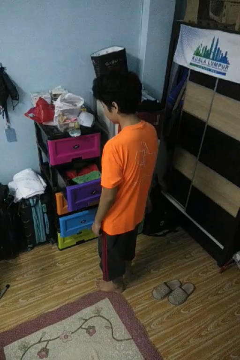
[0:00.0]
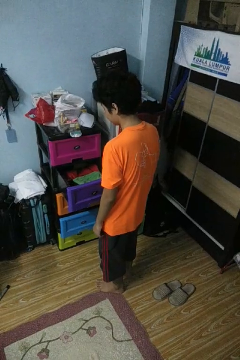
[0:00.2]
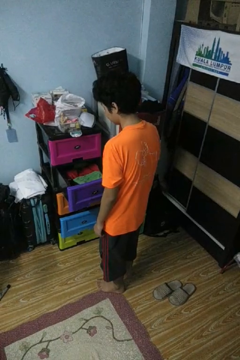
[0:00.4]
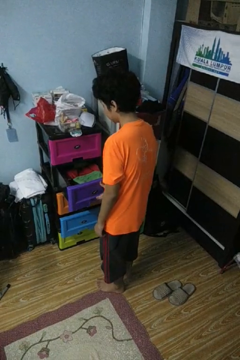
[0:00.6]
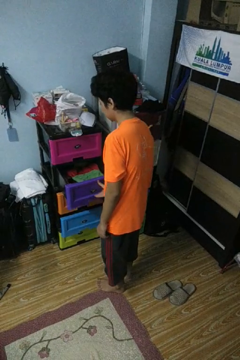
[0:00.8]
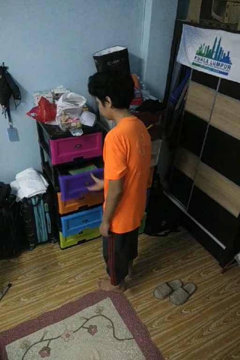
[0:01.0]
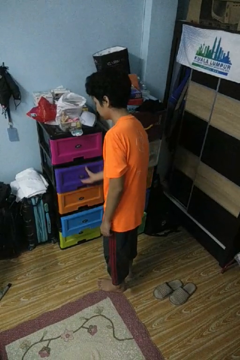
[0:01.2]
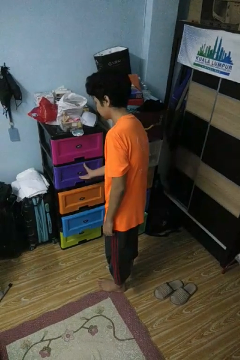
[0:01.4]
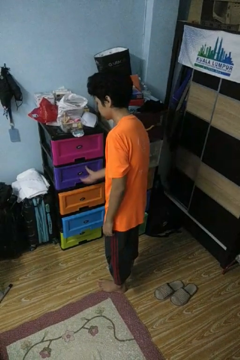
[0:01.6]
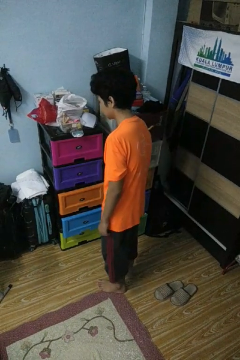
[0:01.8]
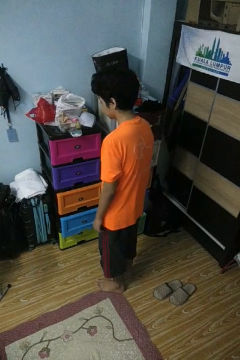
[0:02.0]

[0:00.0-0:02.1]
person closes dresser drawer

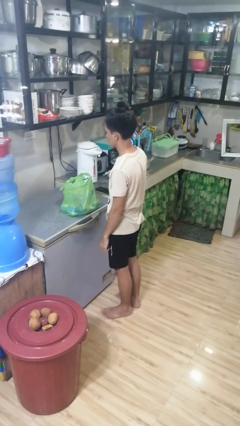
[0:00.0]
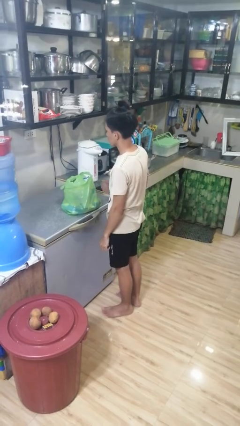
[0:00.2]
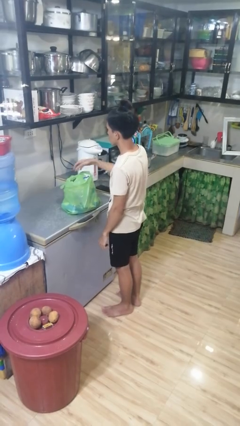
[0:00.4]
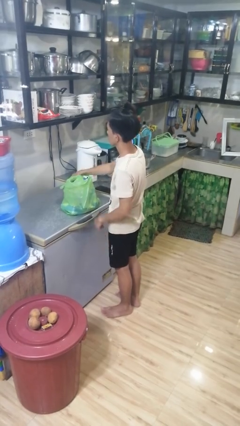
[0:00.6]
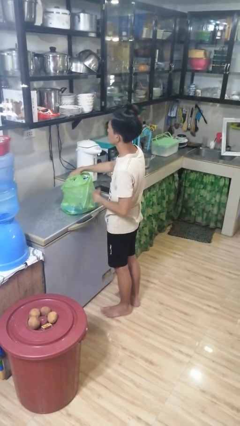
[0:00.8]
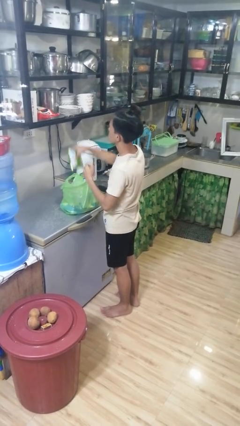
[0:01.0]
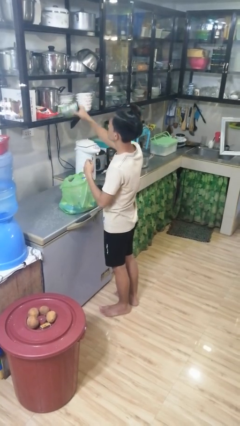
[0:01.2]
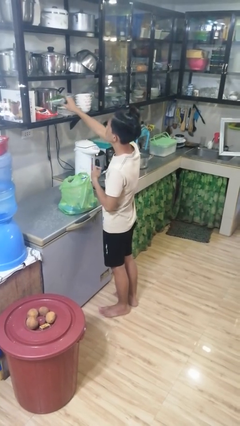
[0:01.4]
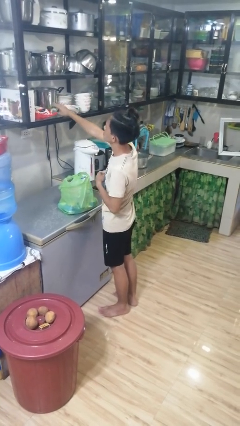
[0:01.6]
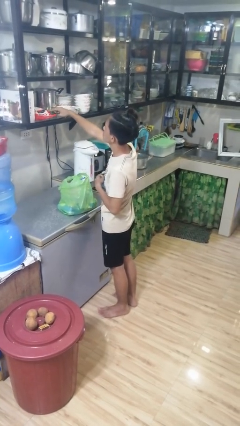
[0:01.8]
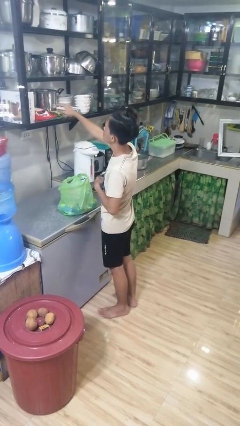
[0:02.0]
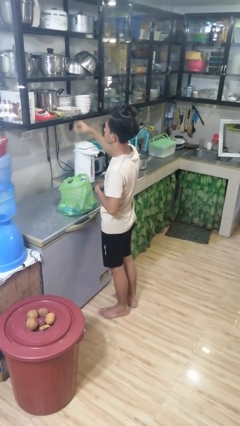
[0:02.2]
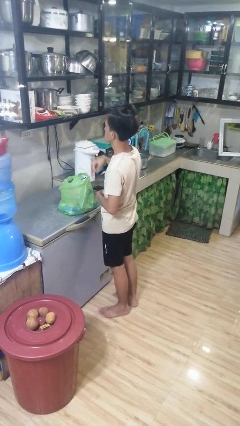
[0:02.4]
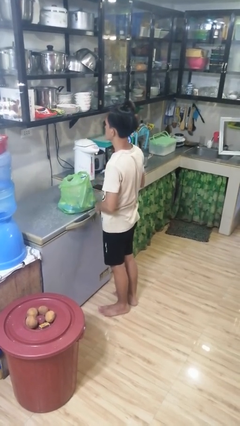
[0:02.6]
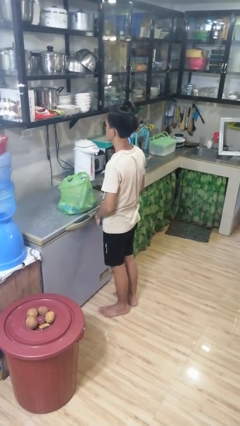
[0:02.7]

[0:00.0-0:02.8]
person loads groceries into cabinet

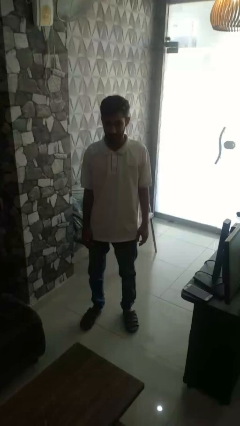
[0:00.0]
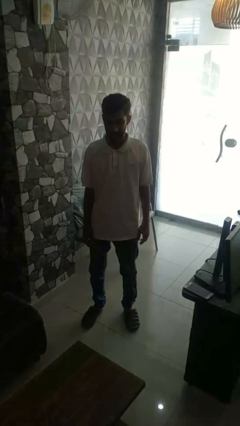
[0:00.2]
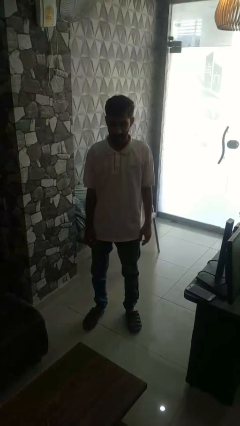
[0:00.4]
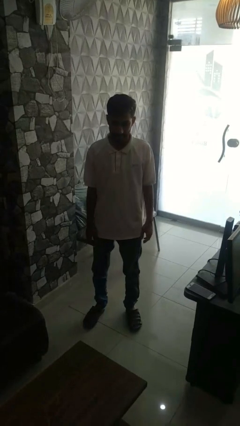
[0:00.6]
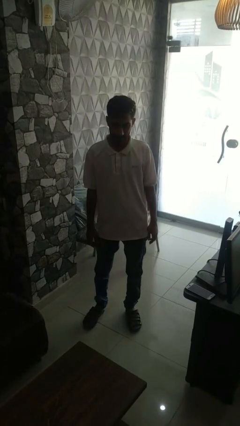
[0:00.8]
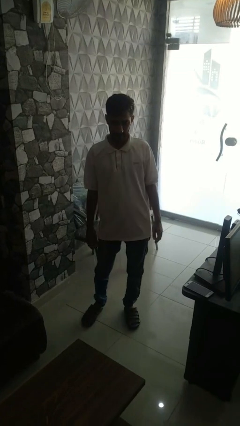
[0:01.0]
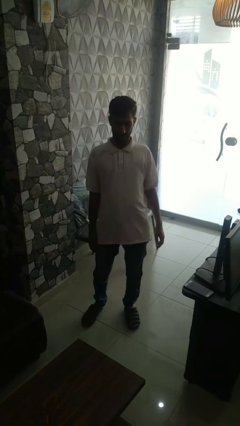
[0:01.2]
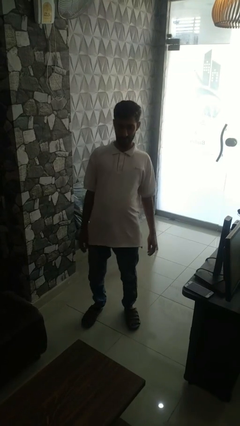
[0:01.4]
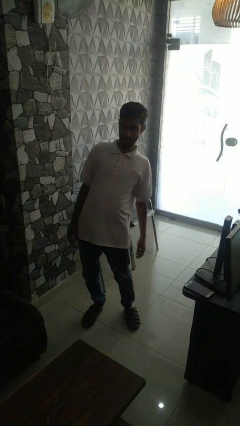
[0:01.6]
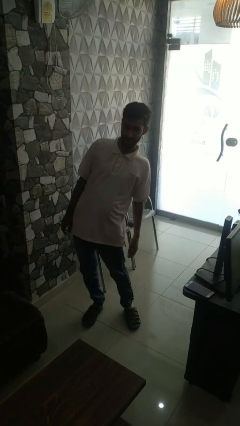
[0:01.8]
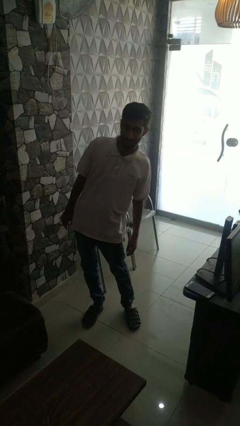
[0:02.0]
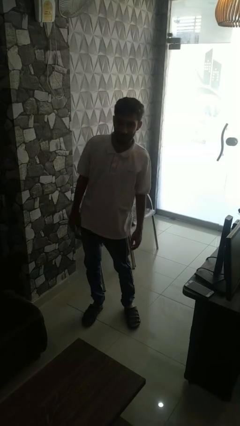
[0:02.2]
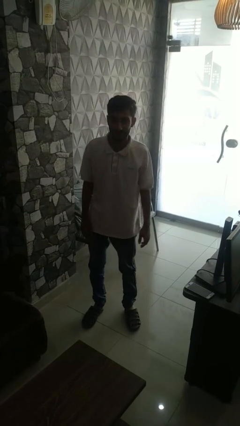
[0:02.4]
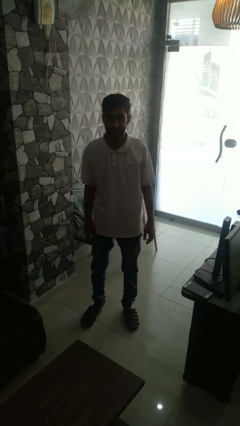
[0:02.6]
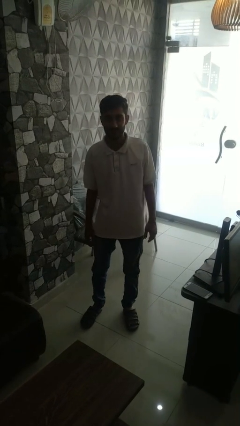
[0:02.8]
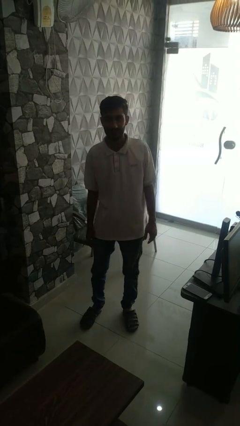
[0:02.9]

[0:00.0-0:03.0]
person wiggles hips

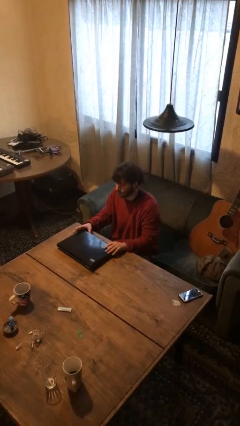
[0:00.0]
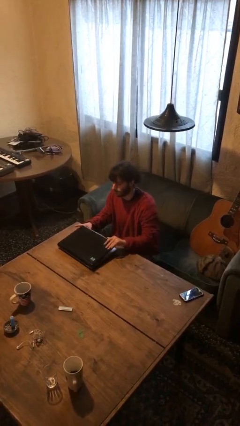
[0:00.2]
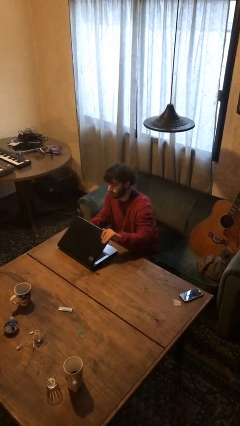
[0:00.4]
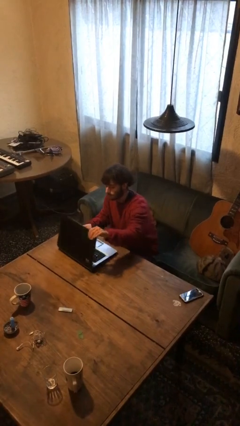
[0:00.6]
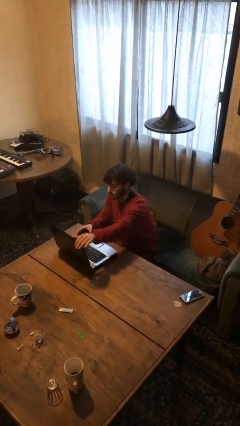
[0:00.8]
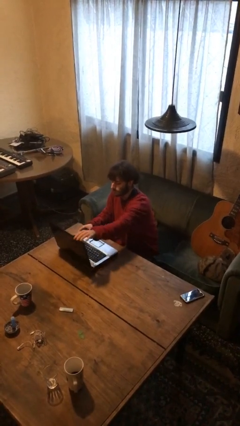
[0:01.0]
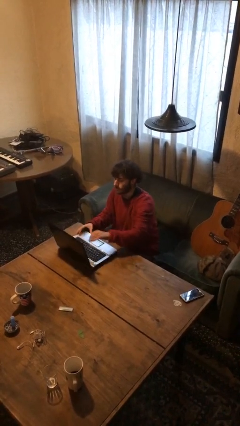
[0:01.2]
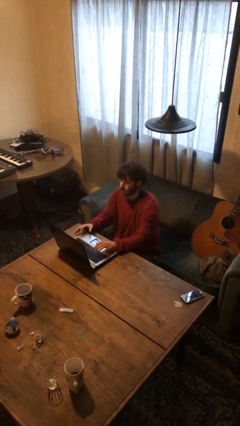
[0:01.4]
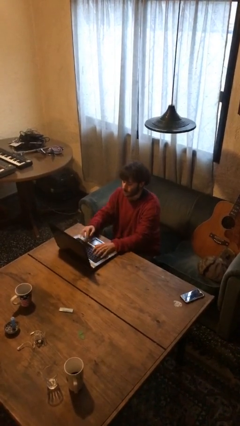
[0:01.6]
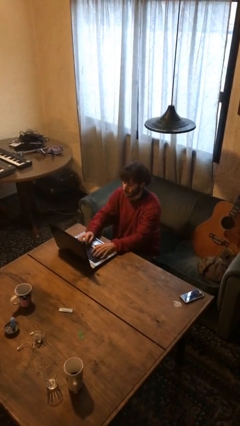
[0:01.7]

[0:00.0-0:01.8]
person opens laptop

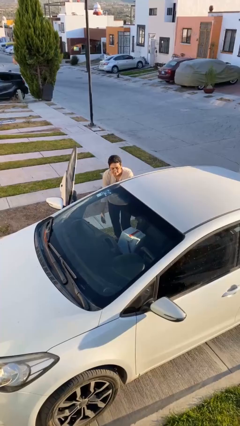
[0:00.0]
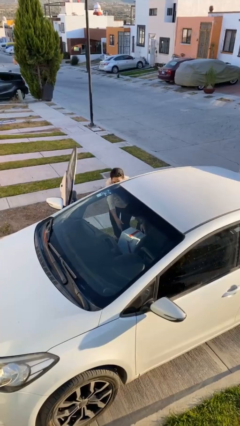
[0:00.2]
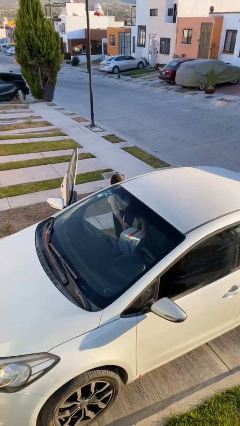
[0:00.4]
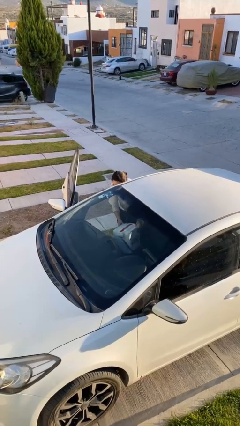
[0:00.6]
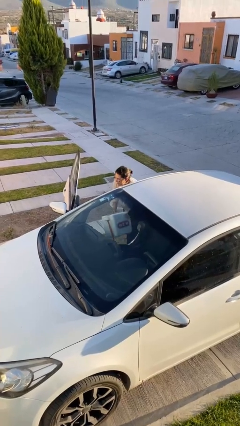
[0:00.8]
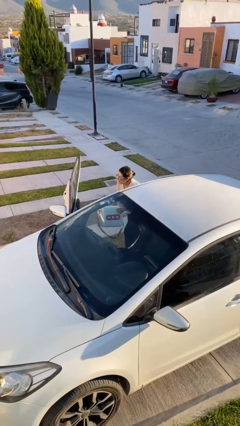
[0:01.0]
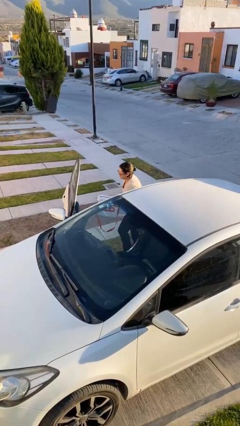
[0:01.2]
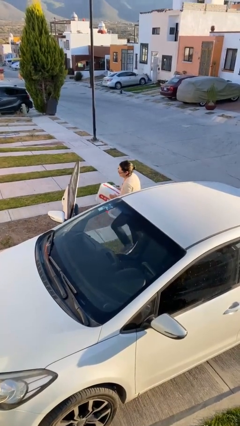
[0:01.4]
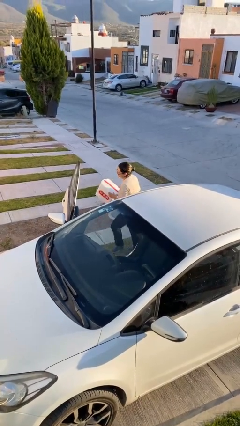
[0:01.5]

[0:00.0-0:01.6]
person unloads car

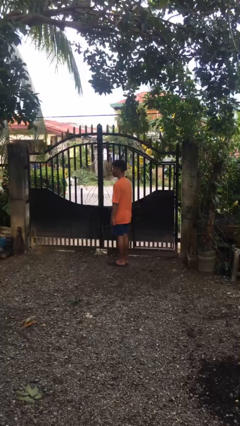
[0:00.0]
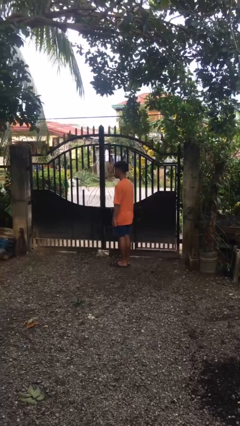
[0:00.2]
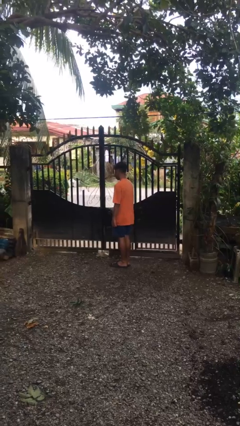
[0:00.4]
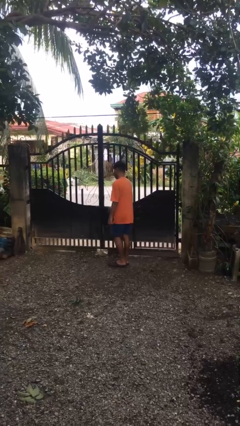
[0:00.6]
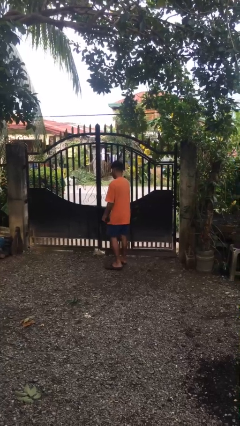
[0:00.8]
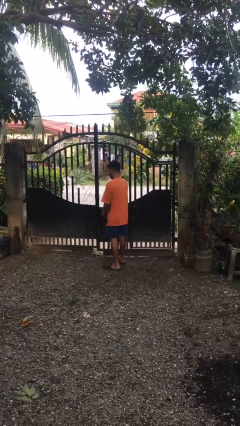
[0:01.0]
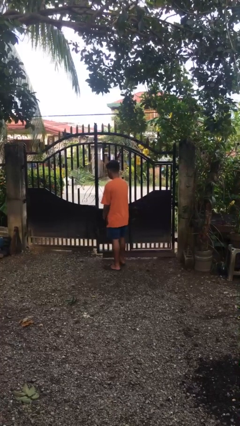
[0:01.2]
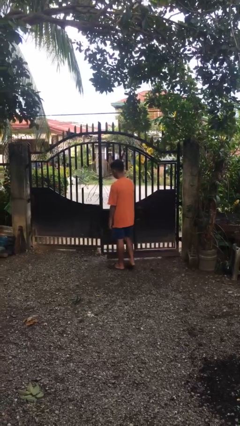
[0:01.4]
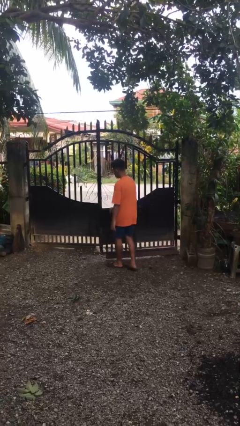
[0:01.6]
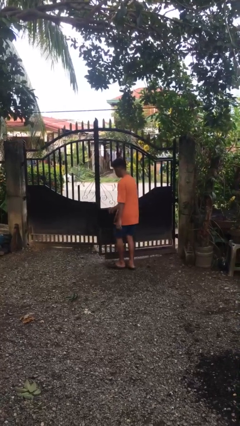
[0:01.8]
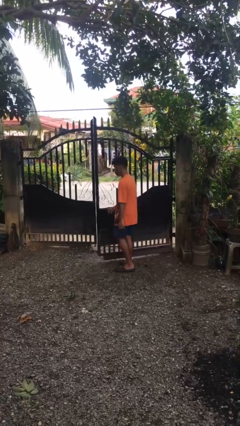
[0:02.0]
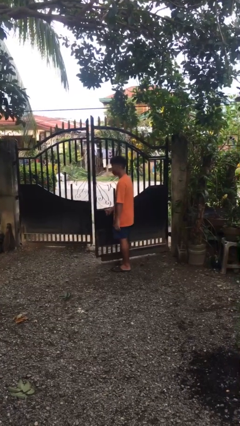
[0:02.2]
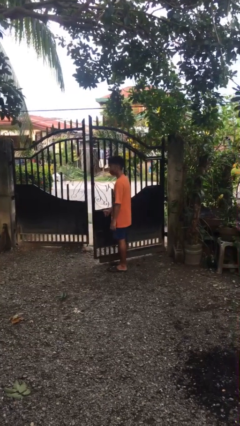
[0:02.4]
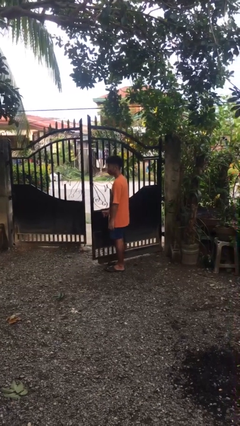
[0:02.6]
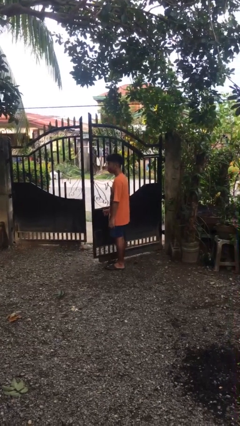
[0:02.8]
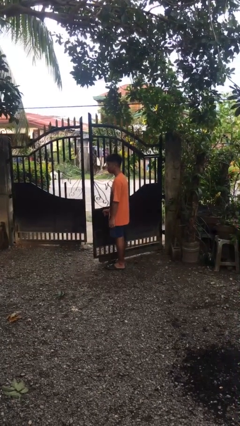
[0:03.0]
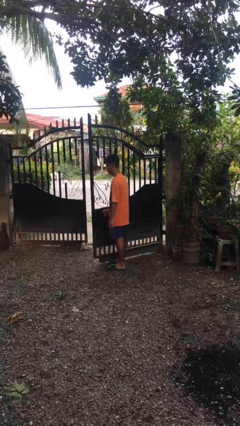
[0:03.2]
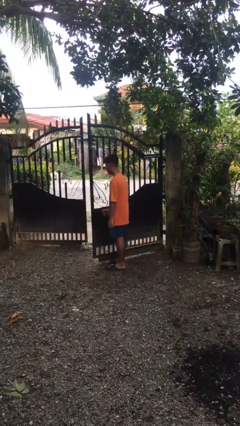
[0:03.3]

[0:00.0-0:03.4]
person opens gate

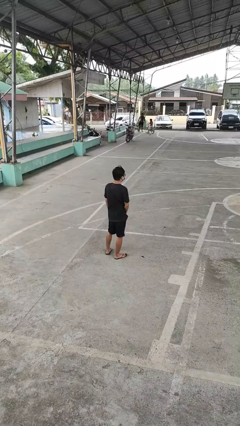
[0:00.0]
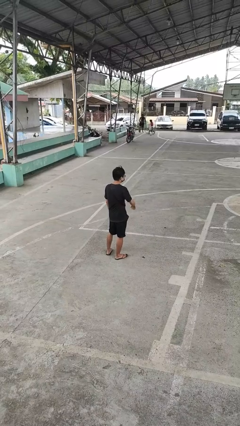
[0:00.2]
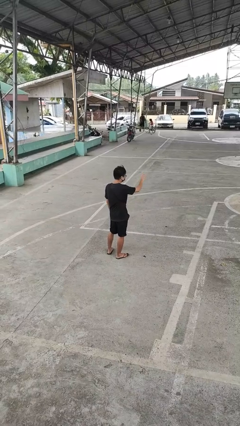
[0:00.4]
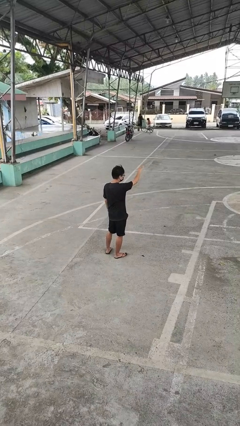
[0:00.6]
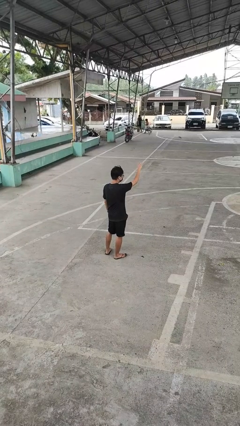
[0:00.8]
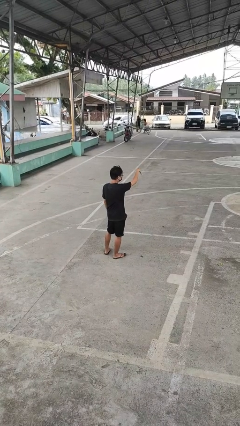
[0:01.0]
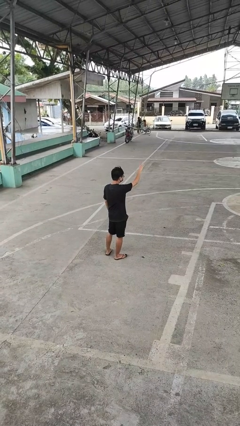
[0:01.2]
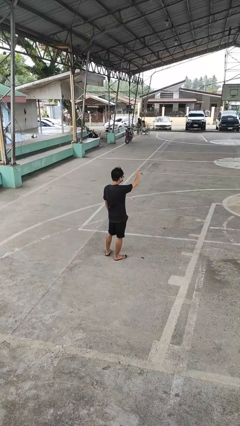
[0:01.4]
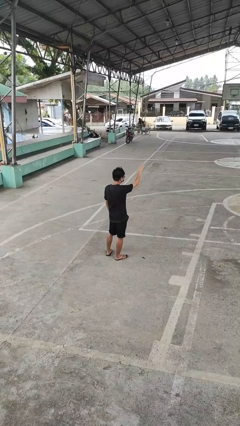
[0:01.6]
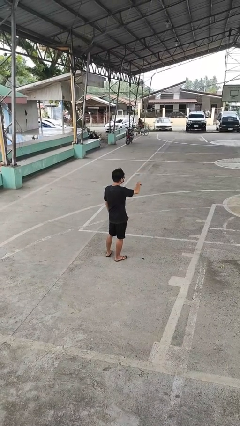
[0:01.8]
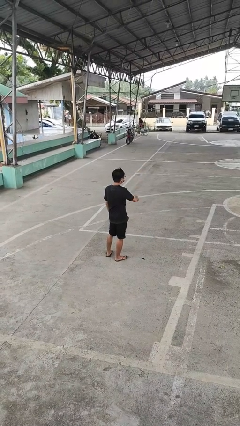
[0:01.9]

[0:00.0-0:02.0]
person gestures come here

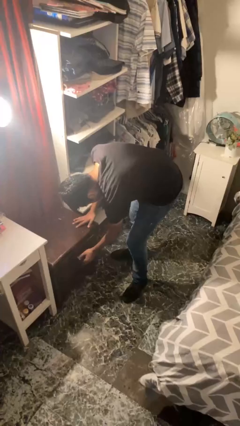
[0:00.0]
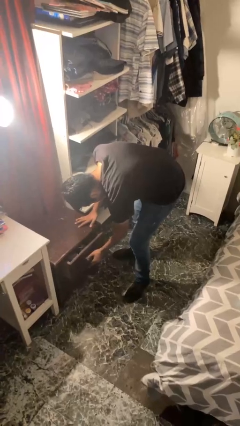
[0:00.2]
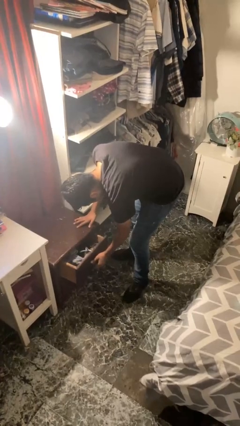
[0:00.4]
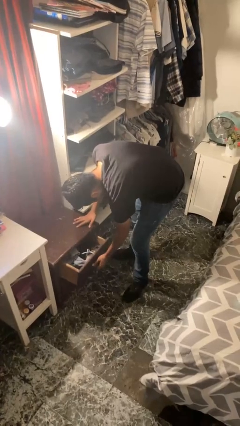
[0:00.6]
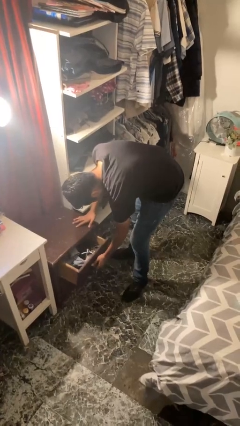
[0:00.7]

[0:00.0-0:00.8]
person opens dresser drawer
